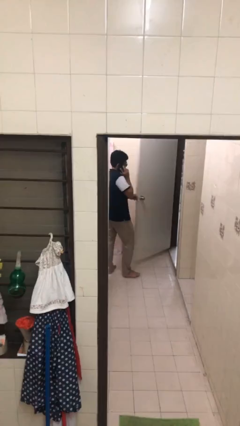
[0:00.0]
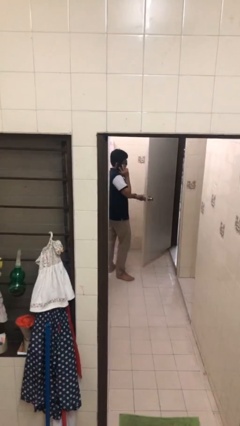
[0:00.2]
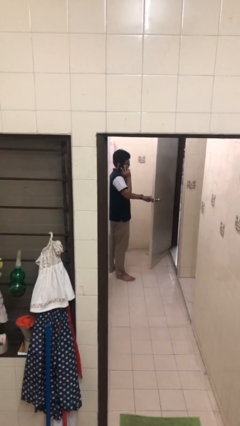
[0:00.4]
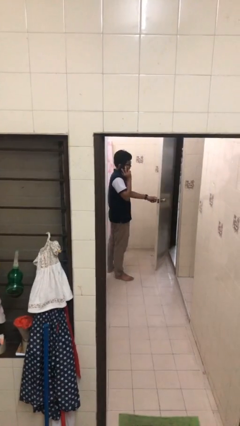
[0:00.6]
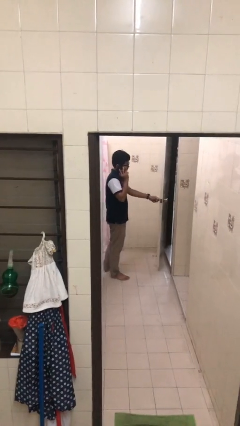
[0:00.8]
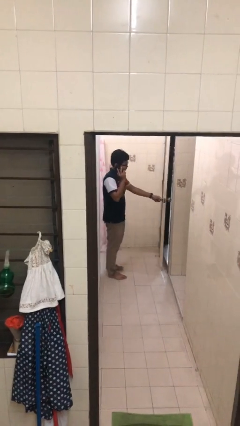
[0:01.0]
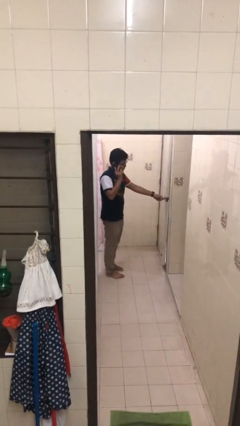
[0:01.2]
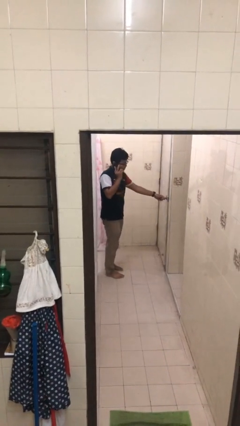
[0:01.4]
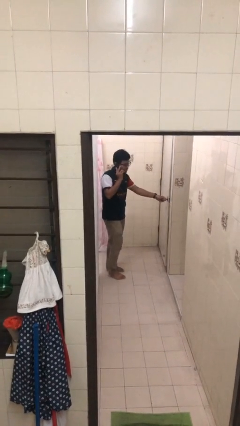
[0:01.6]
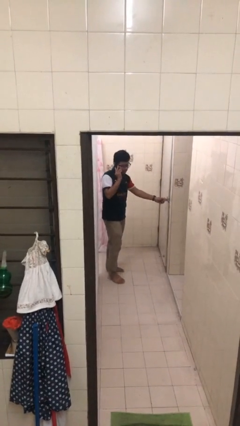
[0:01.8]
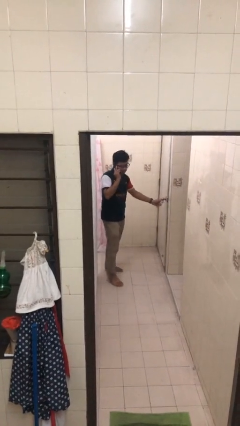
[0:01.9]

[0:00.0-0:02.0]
person closes facility door

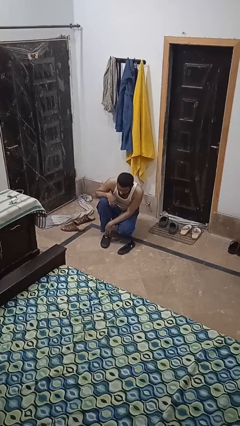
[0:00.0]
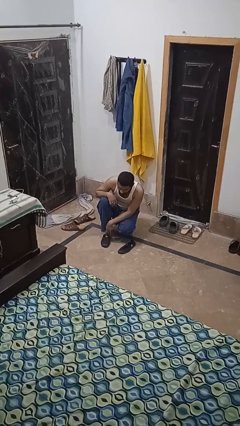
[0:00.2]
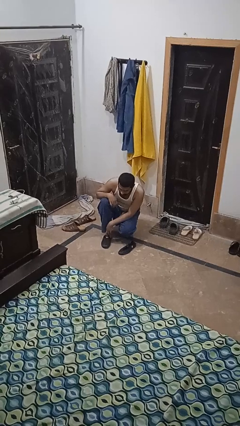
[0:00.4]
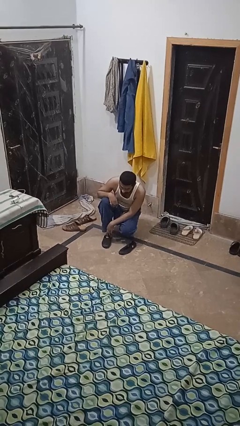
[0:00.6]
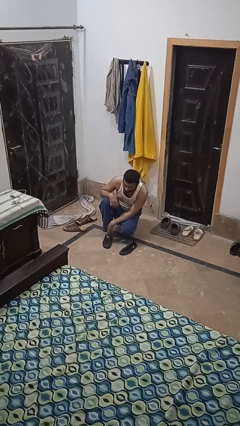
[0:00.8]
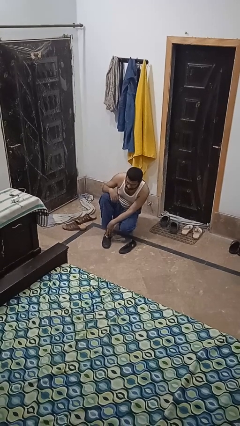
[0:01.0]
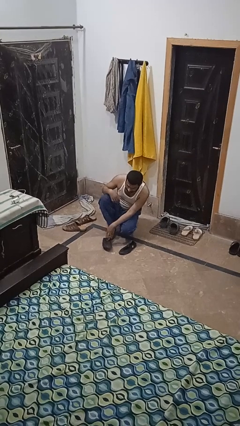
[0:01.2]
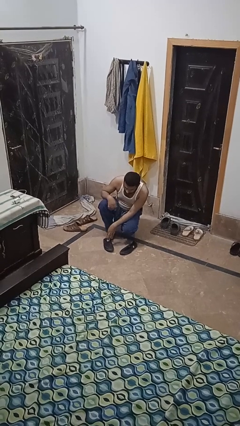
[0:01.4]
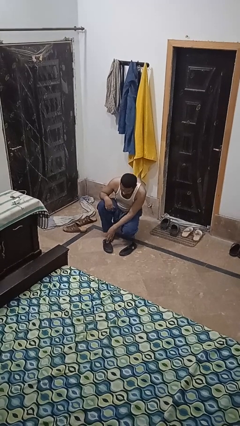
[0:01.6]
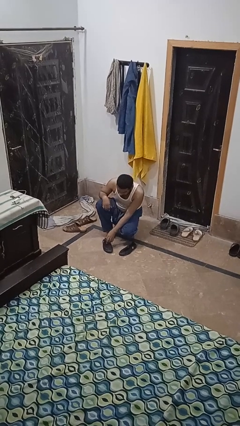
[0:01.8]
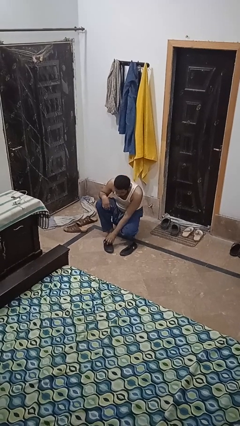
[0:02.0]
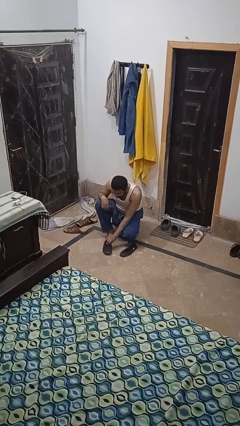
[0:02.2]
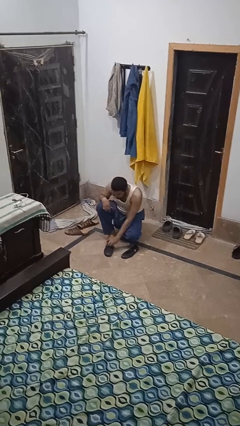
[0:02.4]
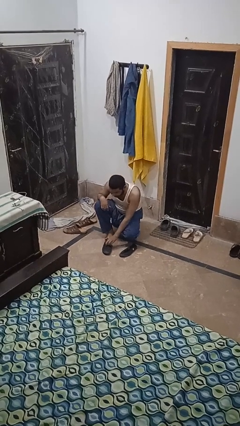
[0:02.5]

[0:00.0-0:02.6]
person takes off shoes

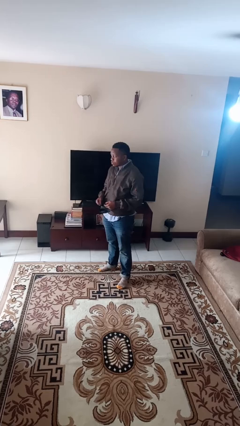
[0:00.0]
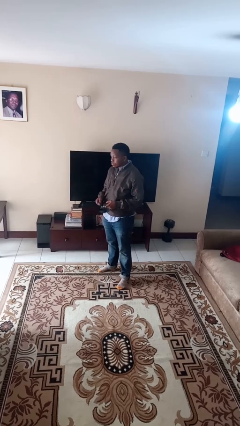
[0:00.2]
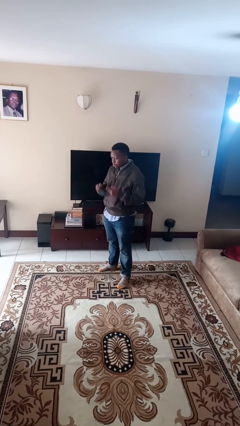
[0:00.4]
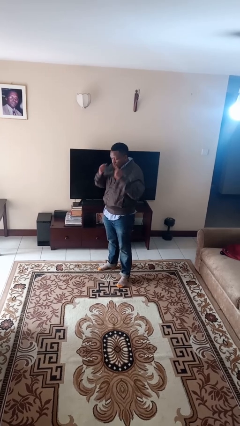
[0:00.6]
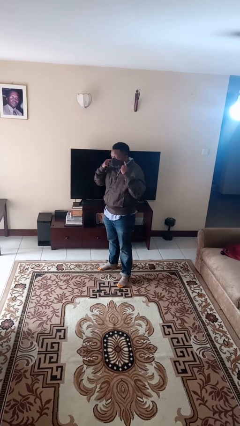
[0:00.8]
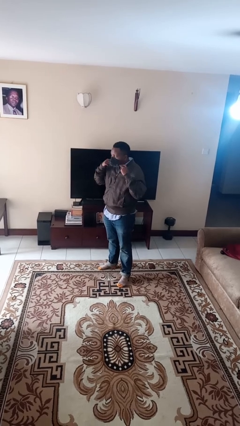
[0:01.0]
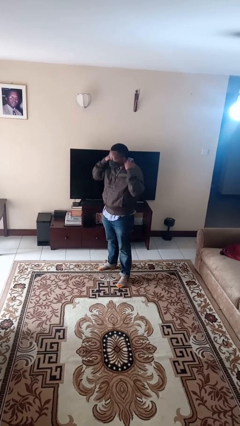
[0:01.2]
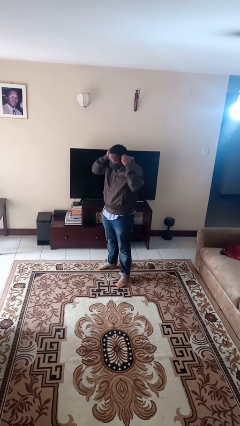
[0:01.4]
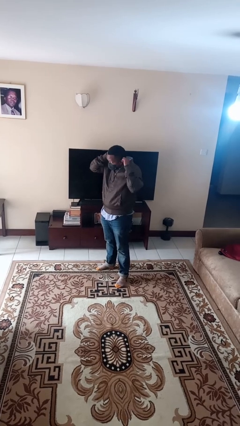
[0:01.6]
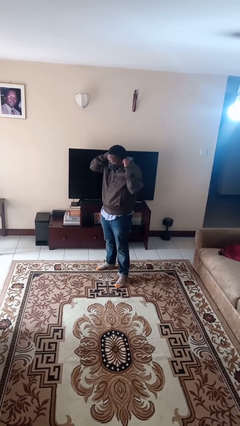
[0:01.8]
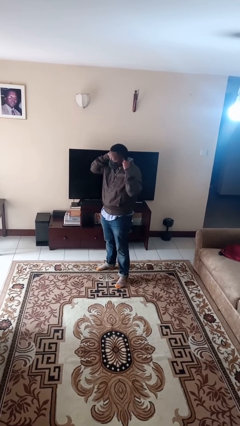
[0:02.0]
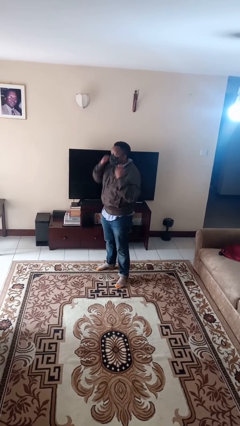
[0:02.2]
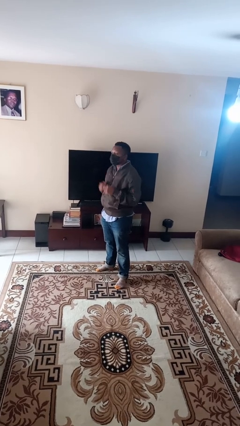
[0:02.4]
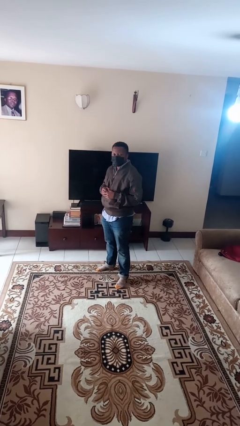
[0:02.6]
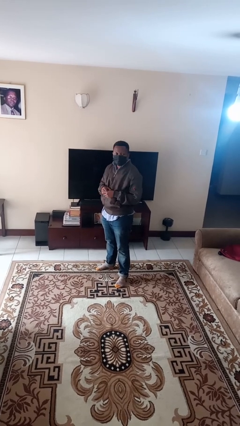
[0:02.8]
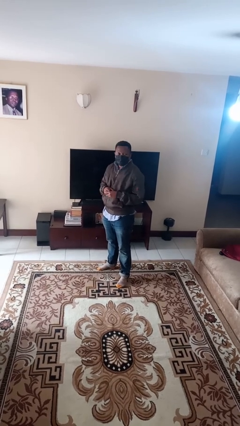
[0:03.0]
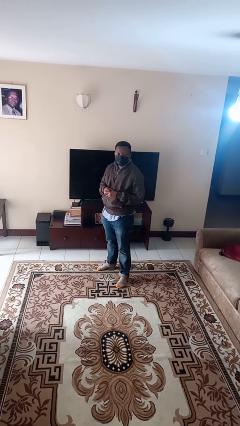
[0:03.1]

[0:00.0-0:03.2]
person puts on facemask

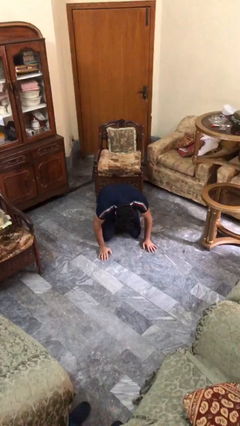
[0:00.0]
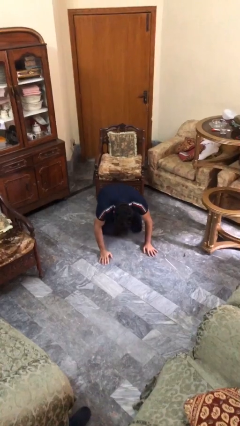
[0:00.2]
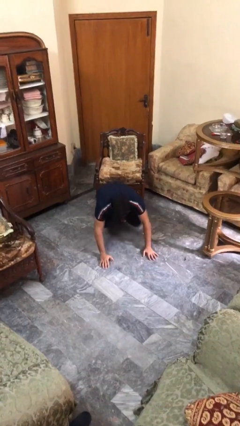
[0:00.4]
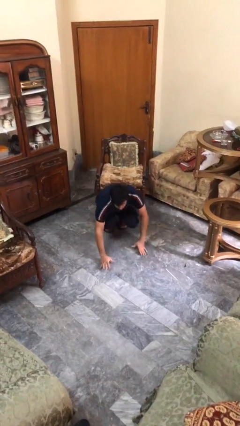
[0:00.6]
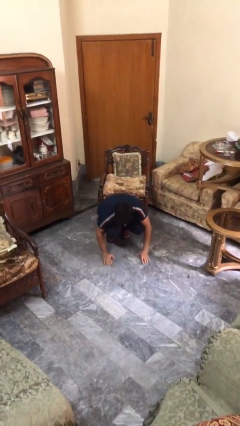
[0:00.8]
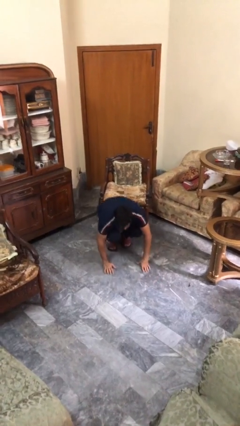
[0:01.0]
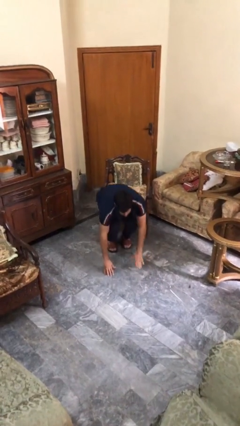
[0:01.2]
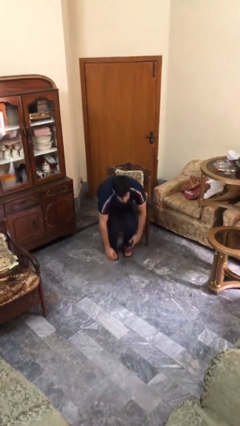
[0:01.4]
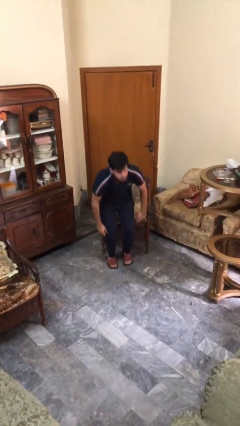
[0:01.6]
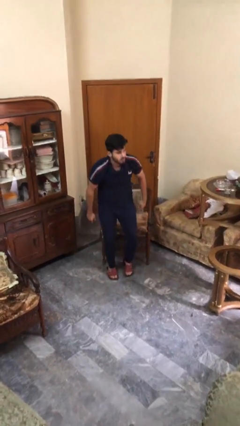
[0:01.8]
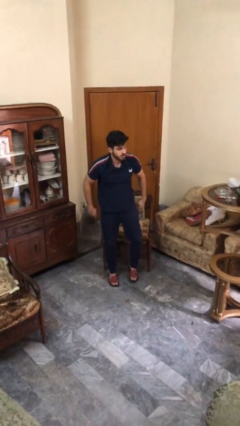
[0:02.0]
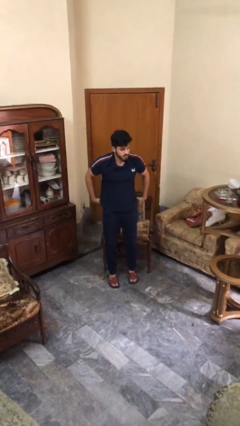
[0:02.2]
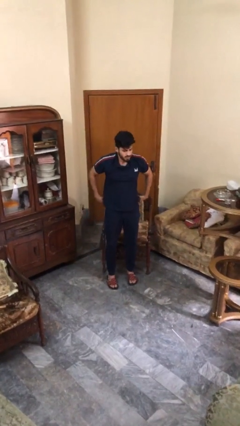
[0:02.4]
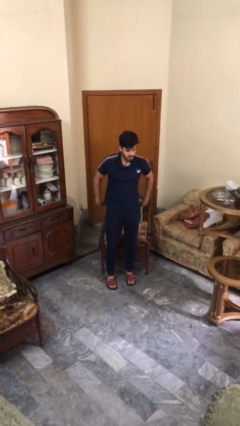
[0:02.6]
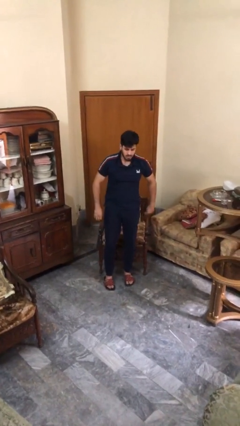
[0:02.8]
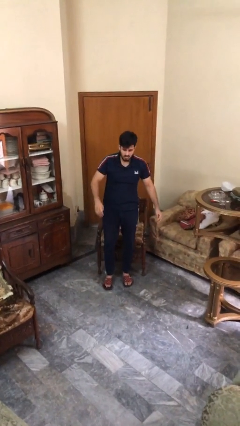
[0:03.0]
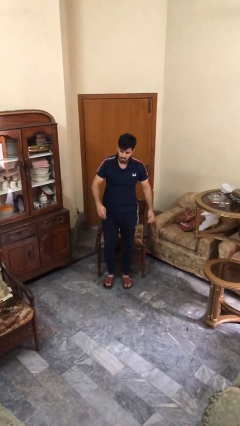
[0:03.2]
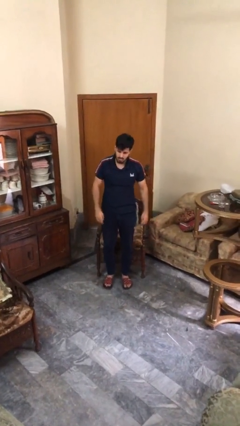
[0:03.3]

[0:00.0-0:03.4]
person stands up from floor

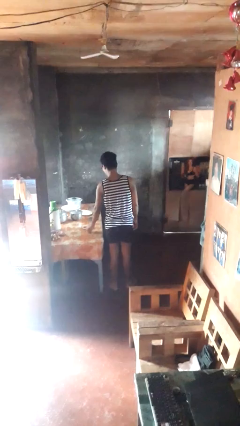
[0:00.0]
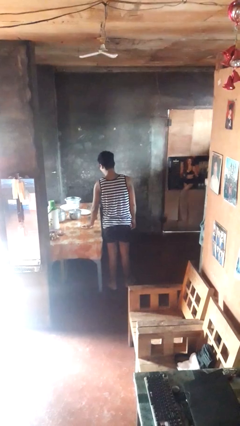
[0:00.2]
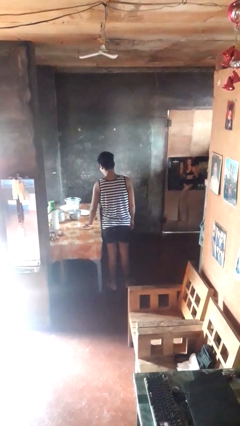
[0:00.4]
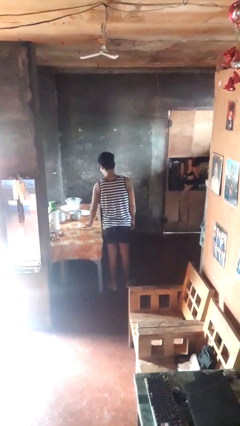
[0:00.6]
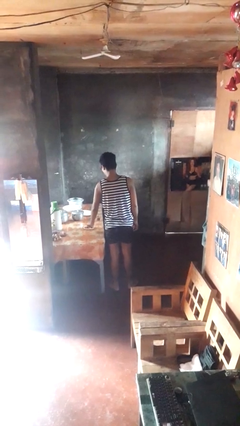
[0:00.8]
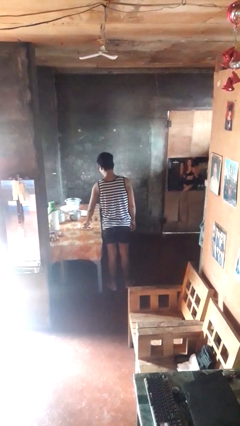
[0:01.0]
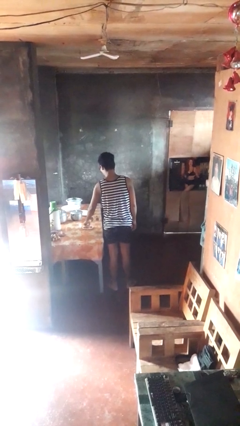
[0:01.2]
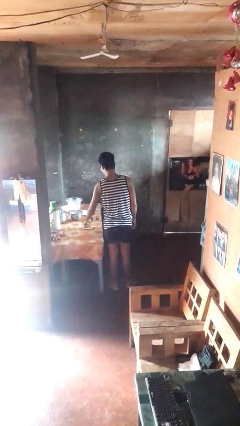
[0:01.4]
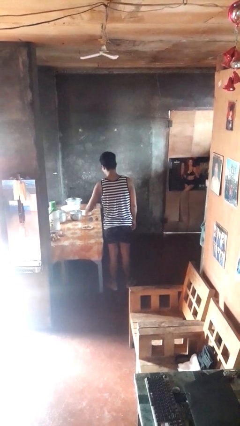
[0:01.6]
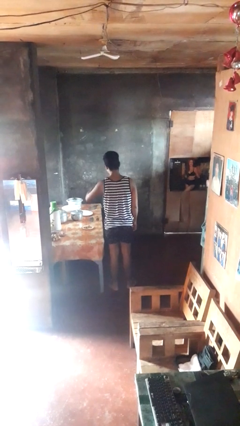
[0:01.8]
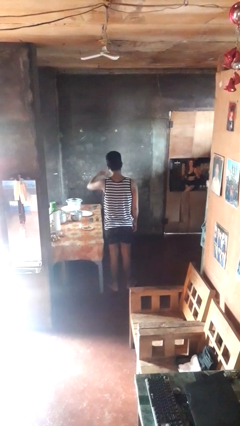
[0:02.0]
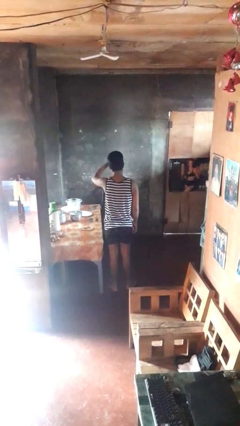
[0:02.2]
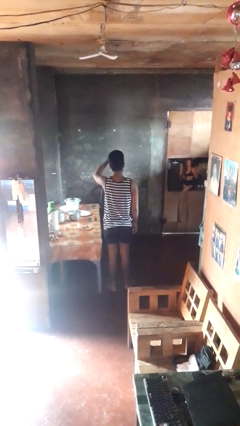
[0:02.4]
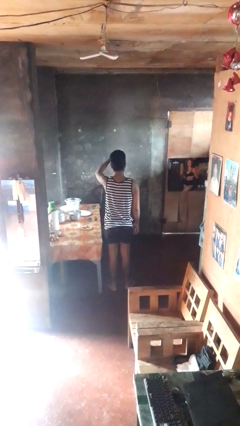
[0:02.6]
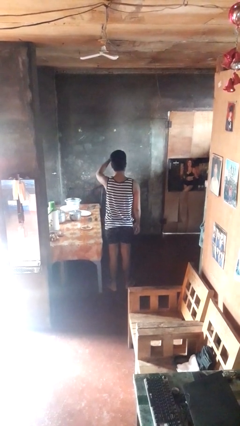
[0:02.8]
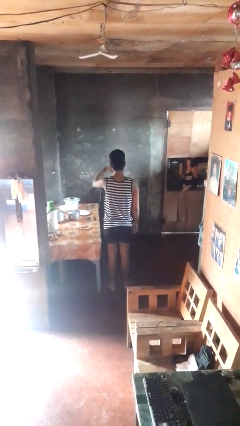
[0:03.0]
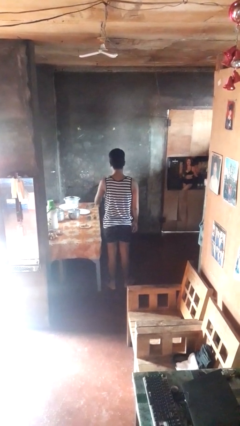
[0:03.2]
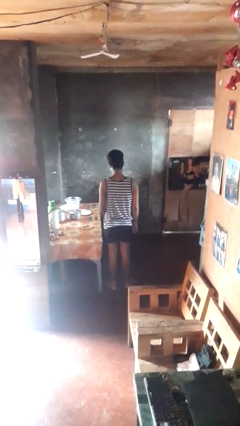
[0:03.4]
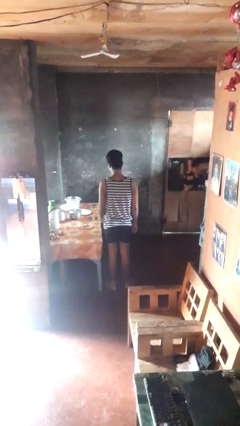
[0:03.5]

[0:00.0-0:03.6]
person eats with utensil

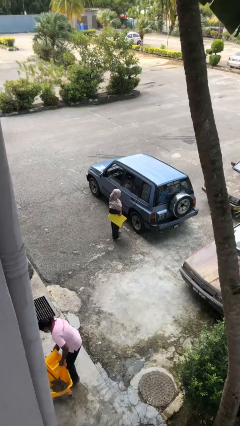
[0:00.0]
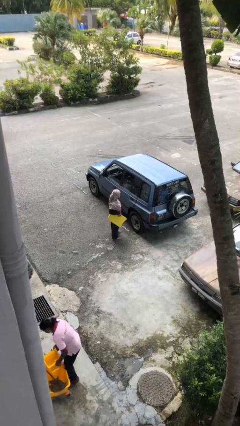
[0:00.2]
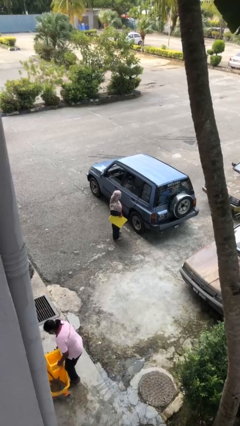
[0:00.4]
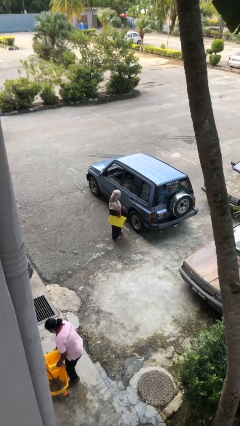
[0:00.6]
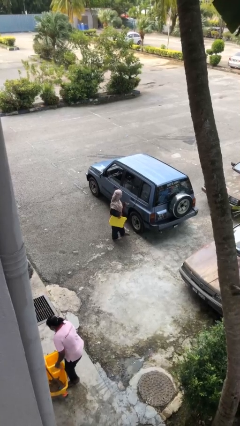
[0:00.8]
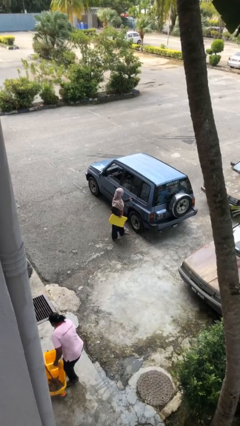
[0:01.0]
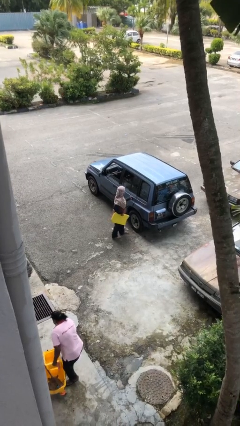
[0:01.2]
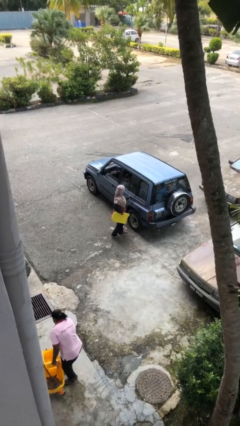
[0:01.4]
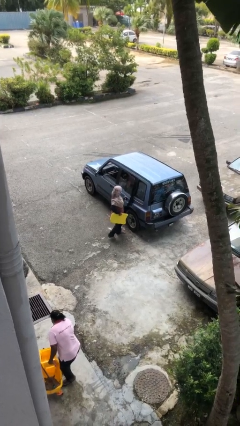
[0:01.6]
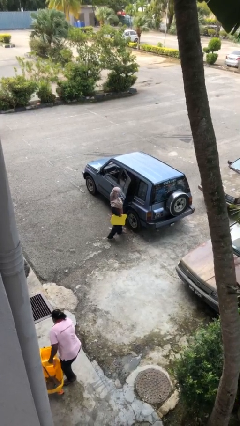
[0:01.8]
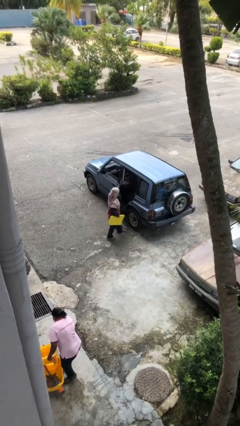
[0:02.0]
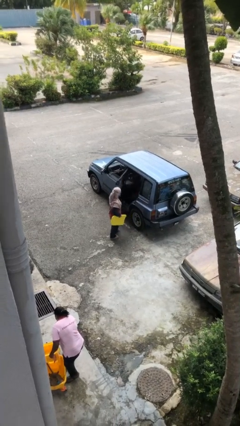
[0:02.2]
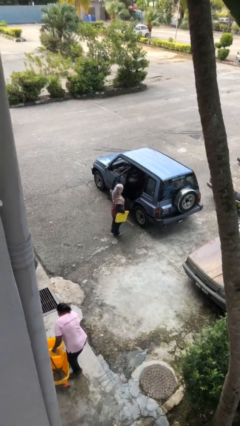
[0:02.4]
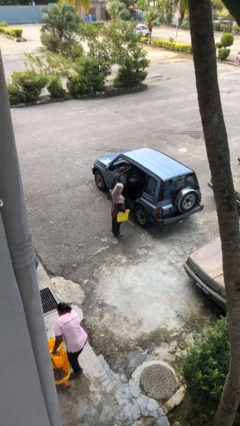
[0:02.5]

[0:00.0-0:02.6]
person opens car door
